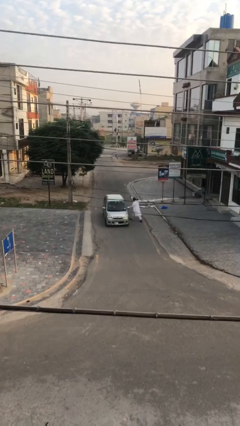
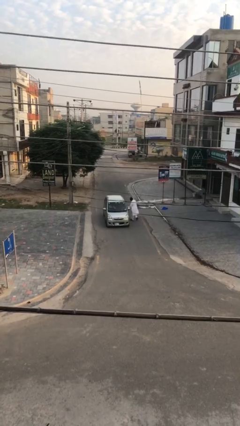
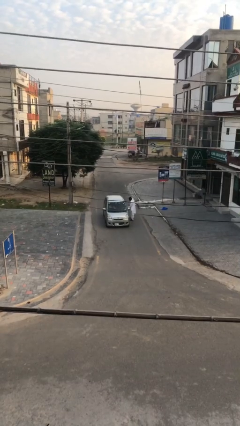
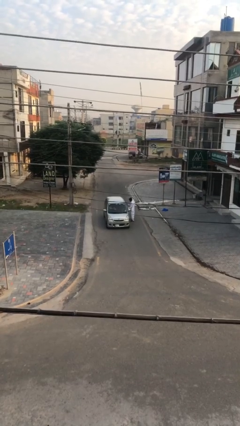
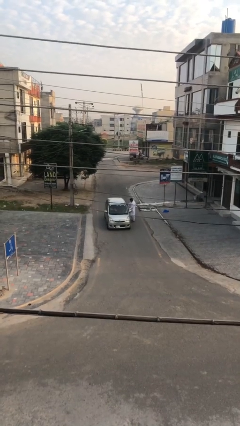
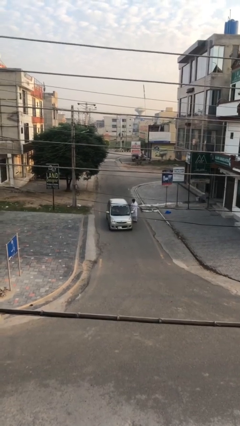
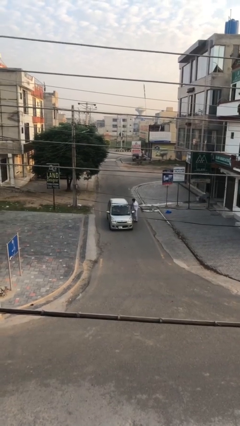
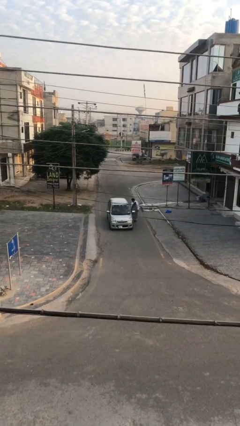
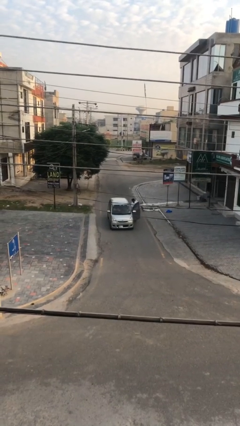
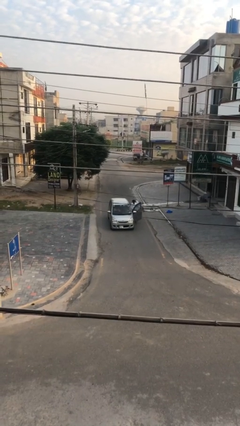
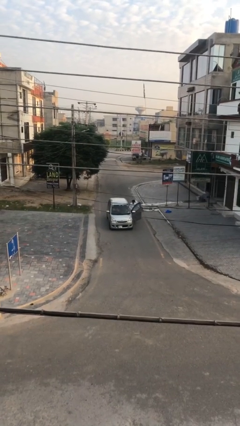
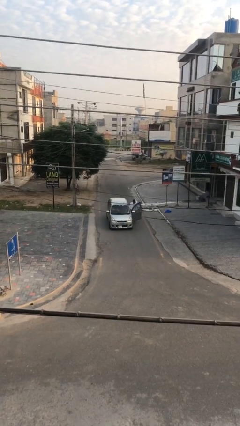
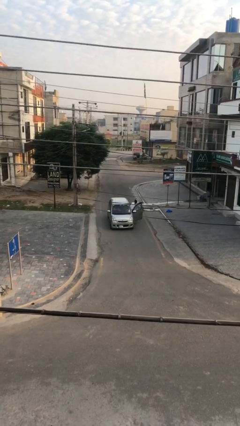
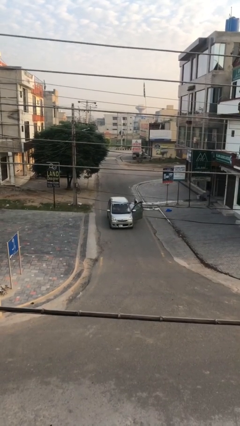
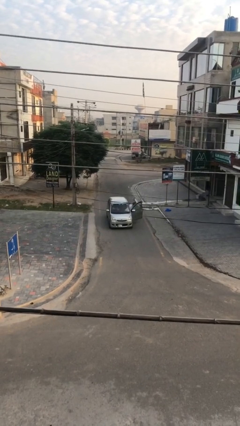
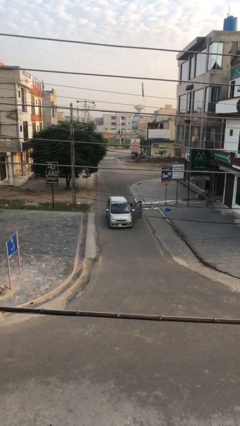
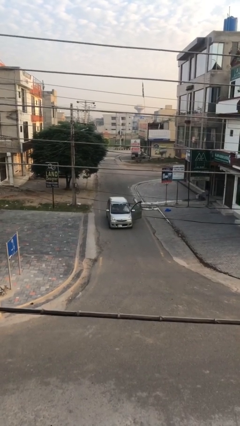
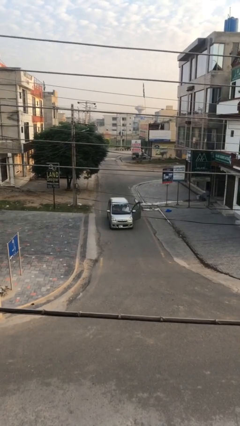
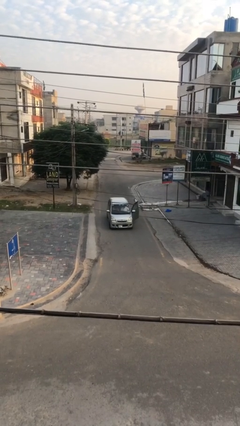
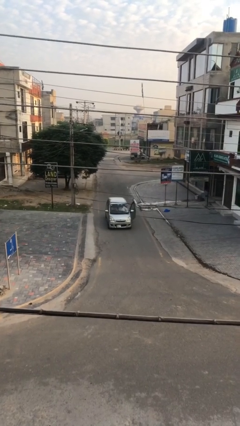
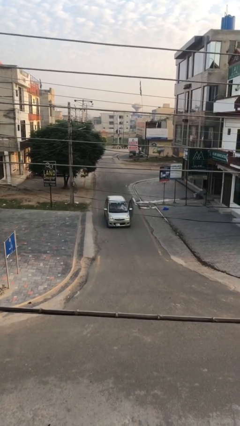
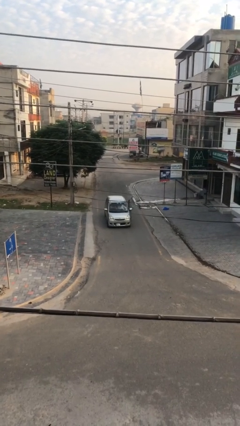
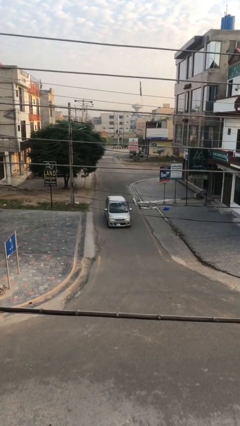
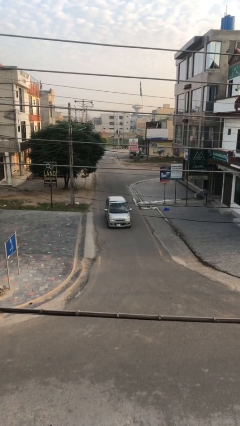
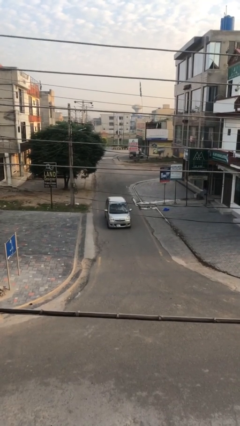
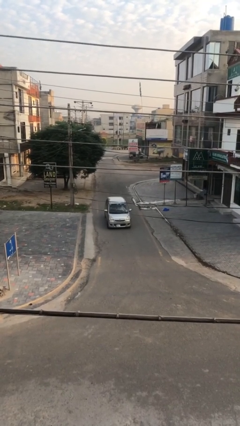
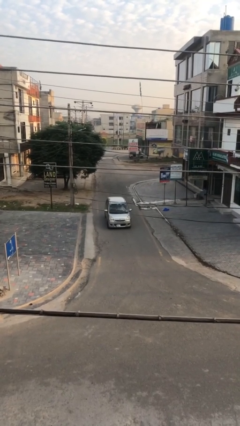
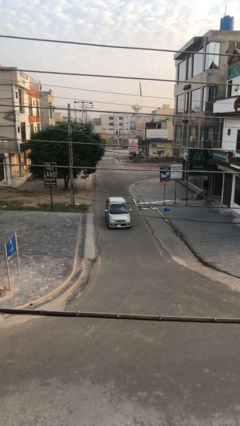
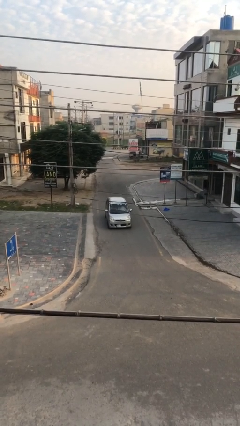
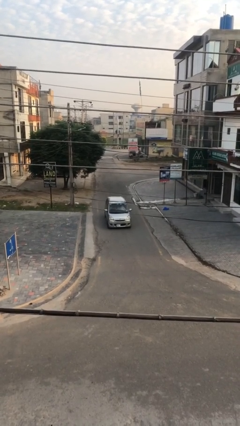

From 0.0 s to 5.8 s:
car picks up person

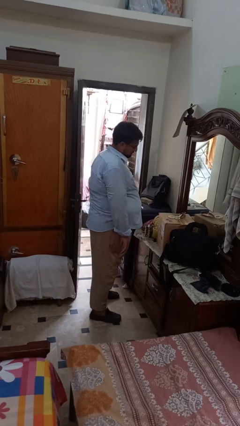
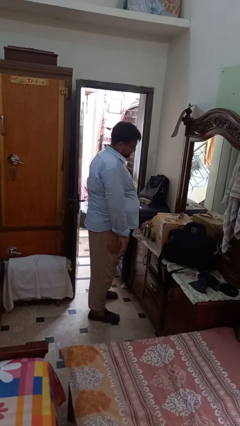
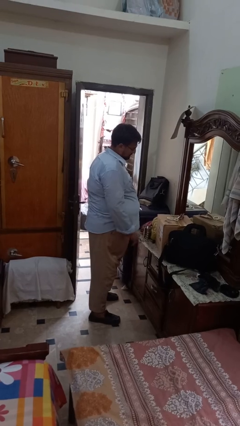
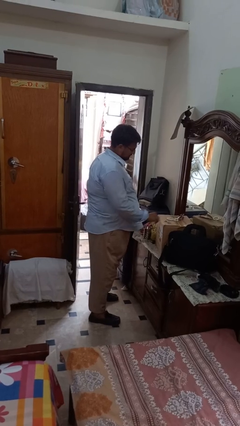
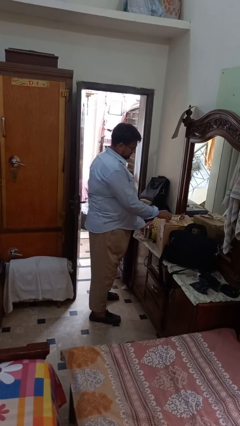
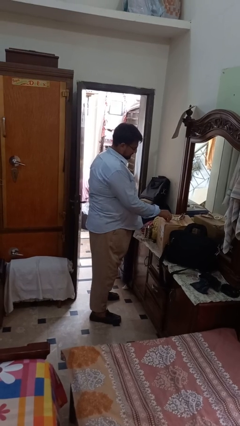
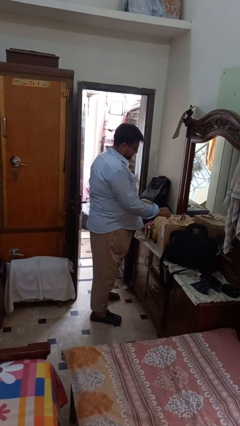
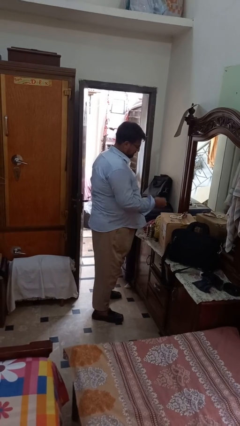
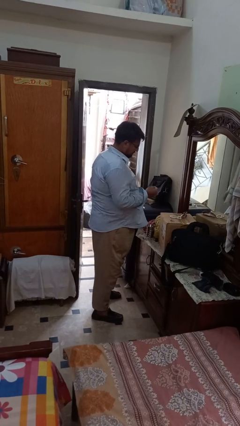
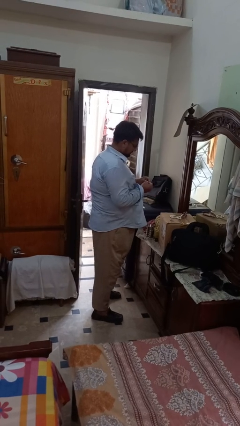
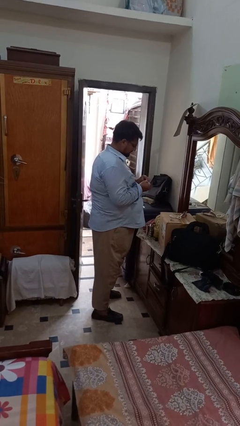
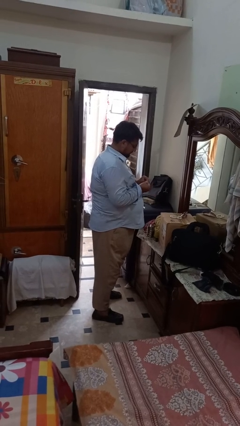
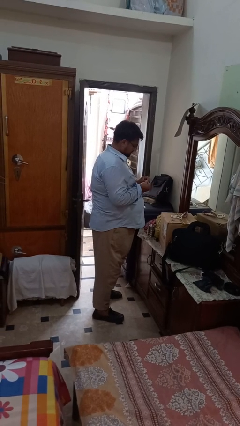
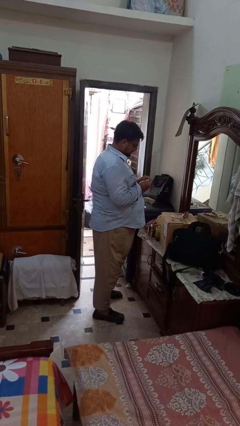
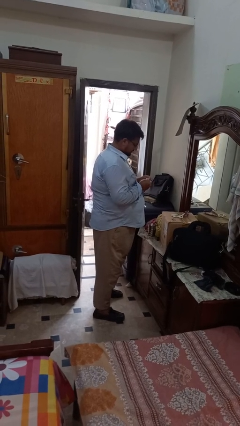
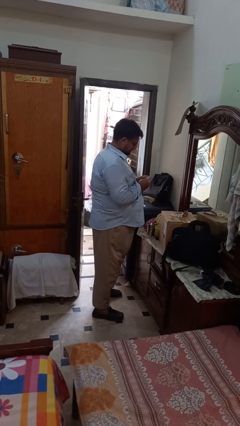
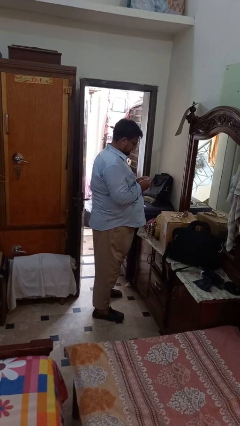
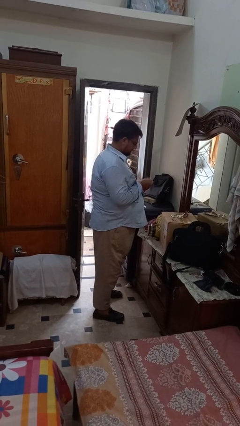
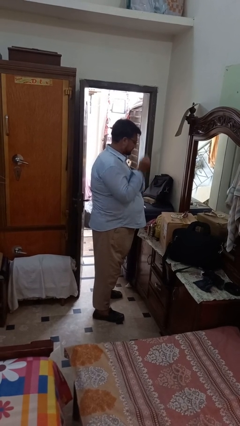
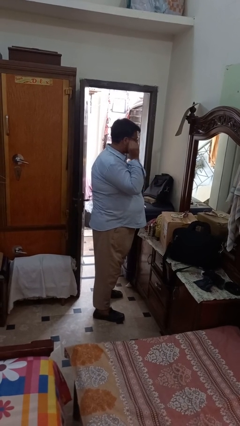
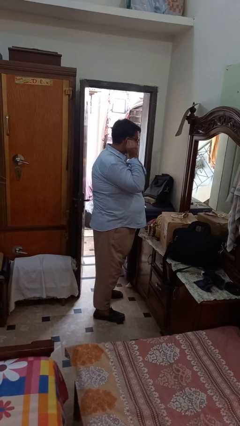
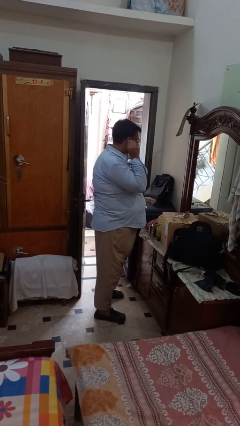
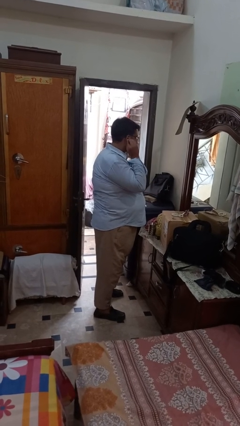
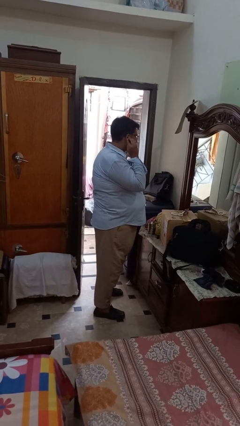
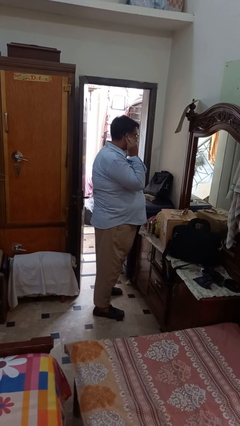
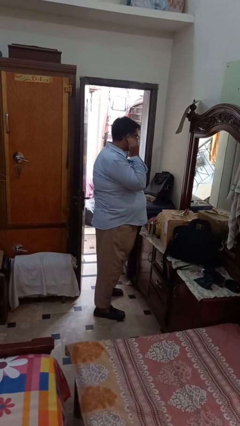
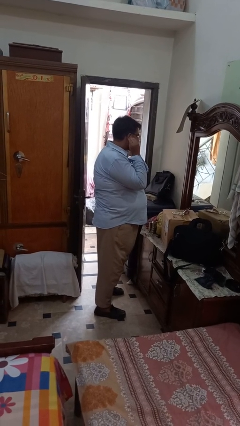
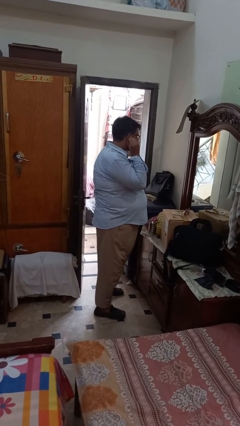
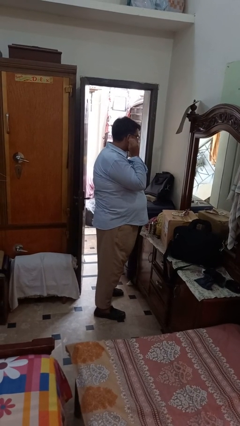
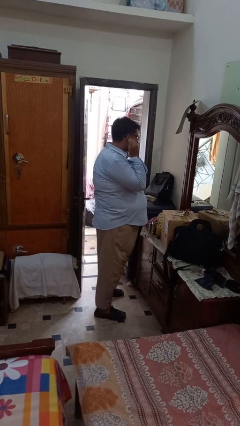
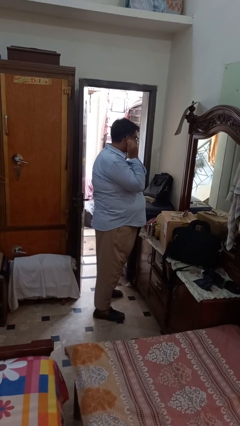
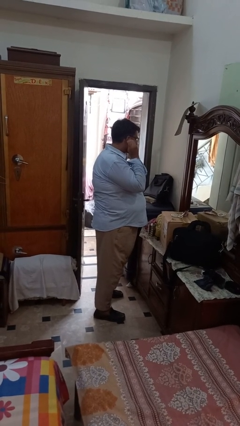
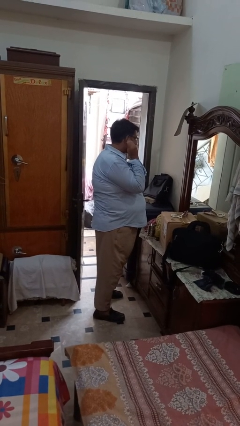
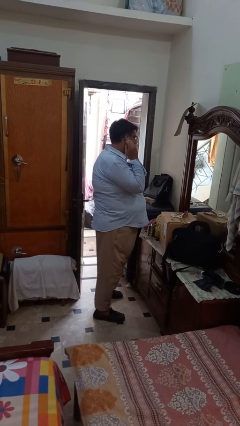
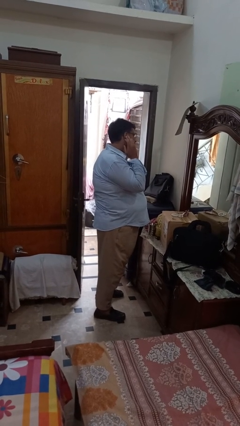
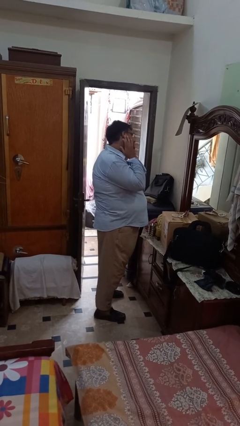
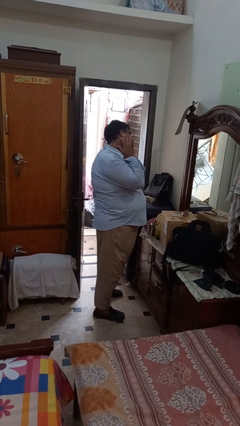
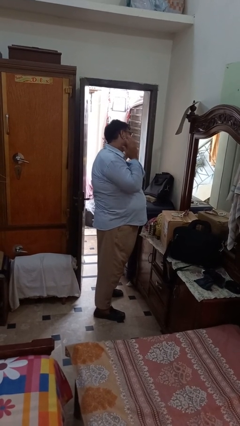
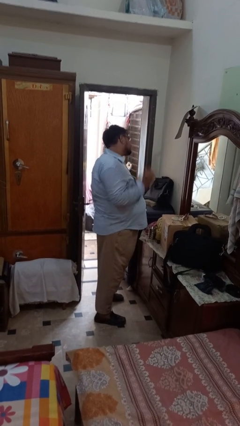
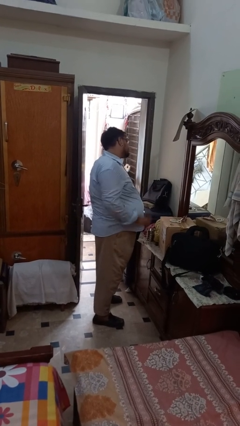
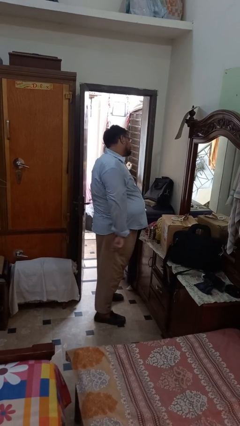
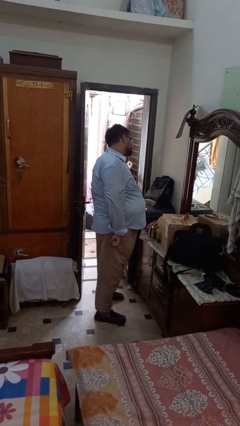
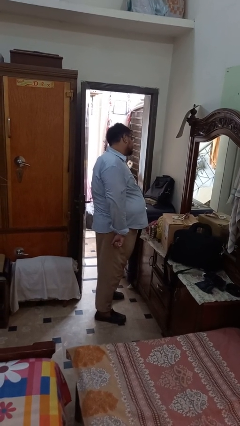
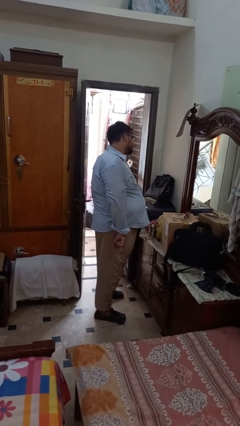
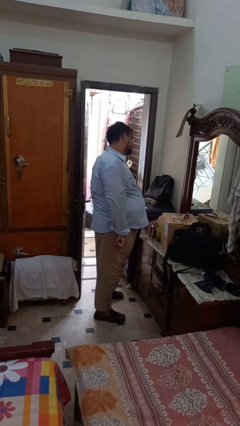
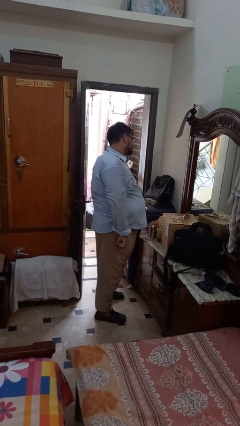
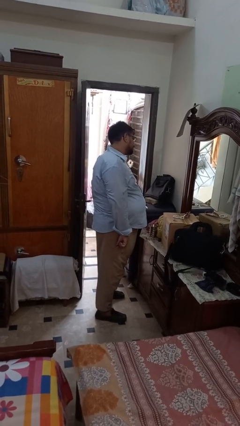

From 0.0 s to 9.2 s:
person puts on earrings

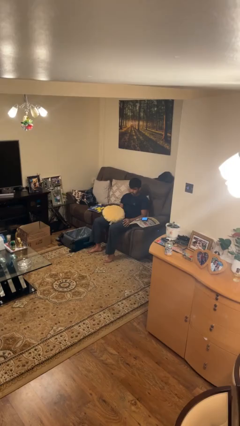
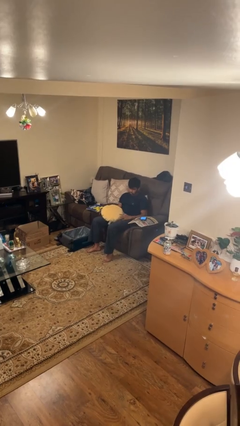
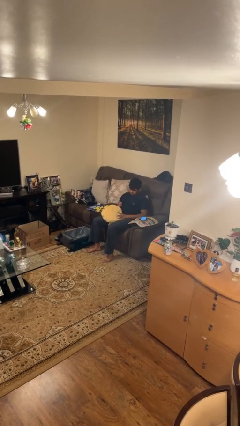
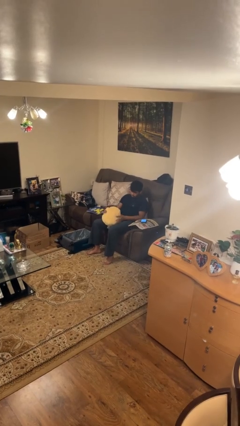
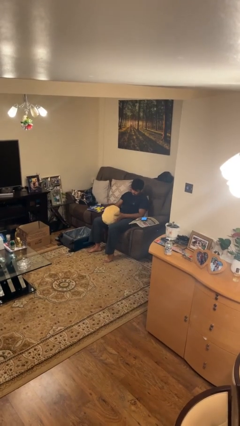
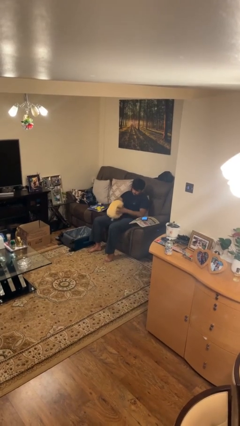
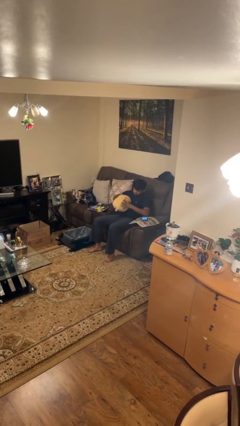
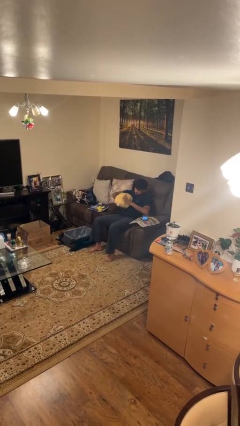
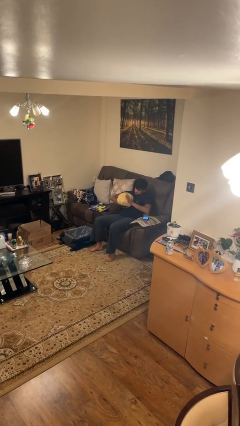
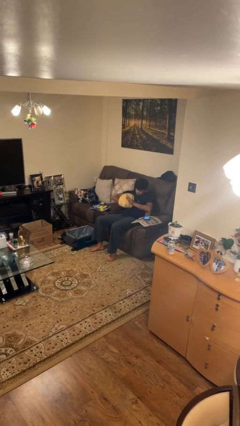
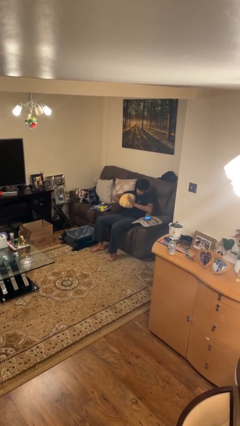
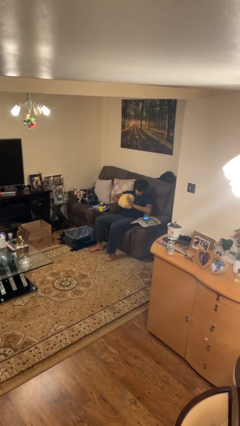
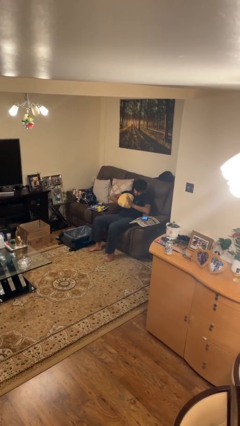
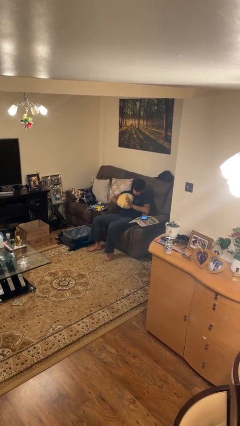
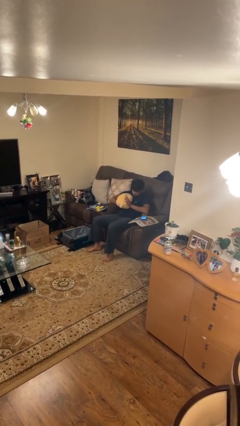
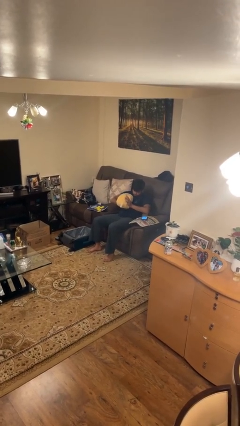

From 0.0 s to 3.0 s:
person squeezes object
